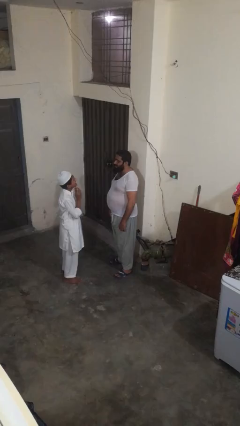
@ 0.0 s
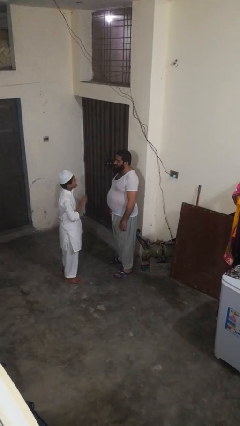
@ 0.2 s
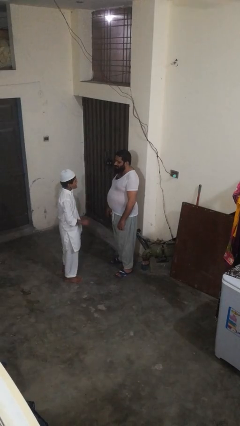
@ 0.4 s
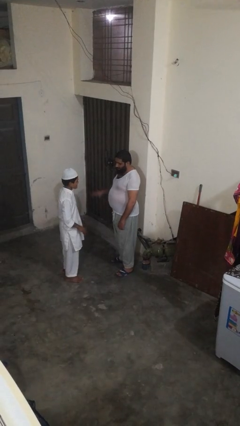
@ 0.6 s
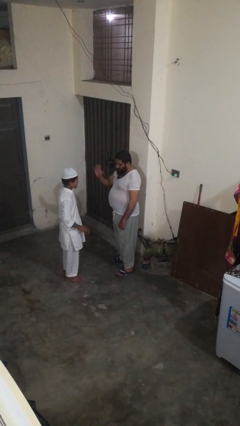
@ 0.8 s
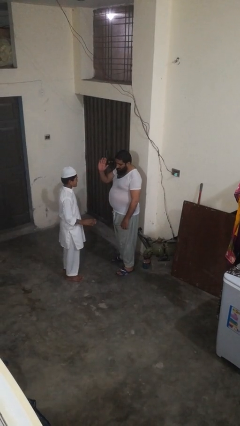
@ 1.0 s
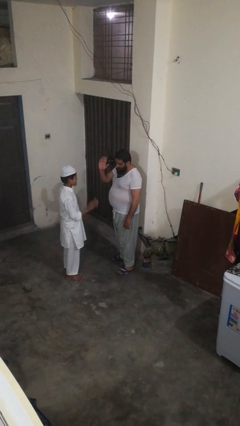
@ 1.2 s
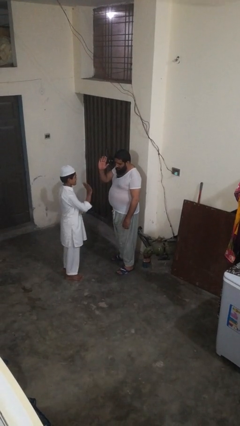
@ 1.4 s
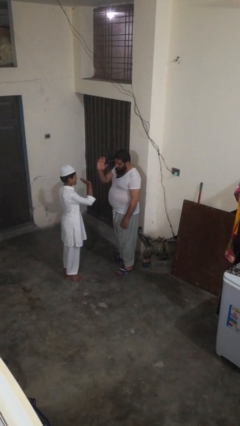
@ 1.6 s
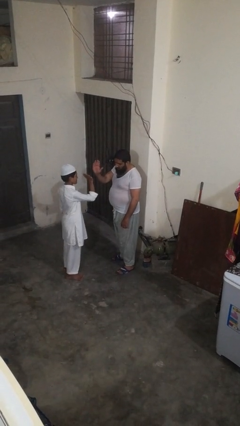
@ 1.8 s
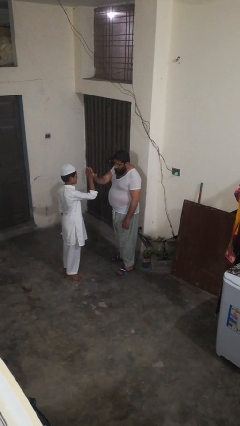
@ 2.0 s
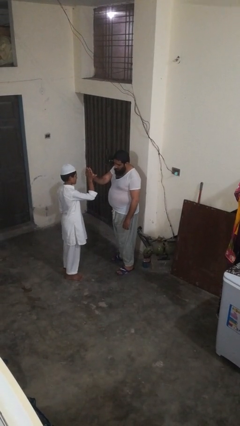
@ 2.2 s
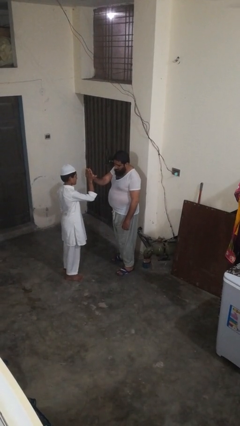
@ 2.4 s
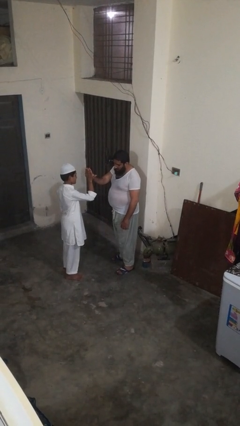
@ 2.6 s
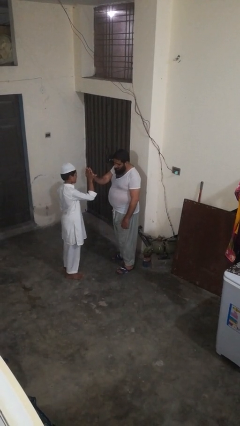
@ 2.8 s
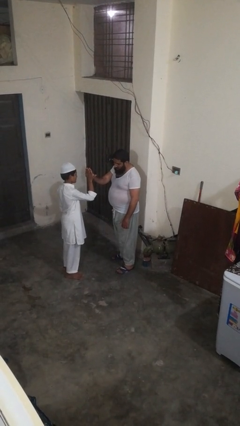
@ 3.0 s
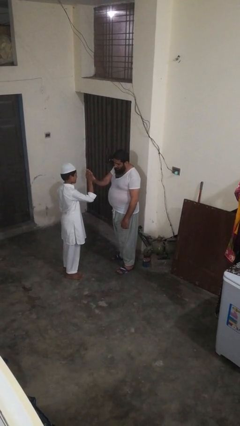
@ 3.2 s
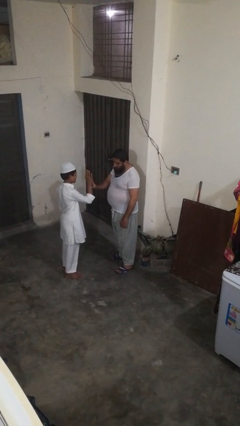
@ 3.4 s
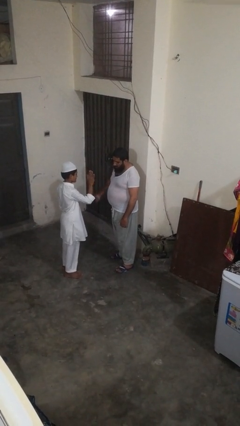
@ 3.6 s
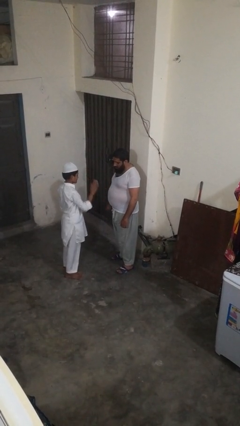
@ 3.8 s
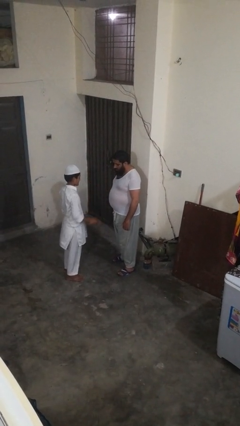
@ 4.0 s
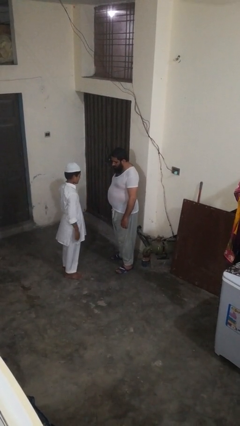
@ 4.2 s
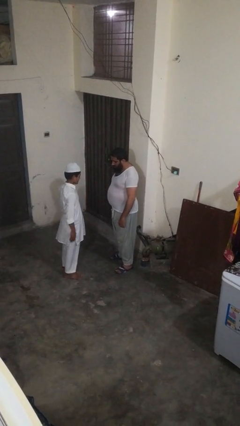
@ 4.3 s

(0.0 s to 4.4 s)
person highfives hand

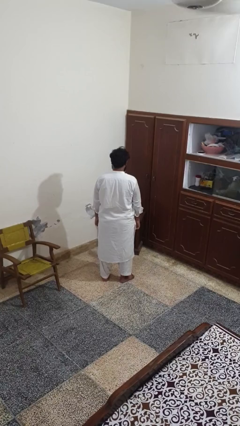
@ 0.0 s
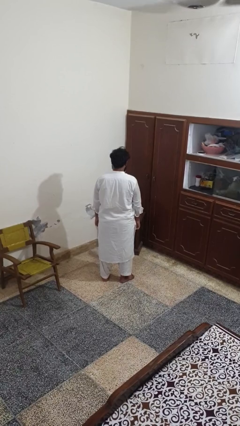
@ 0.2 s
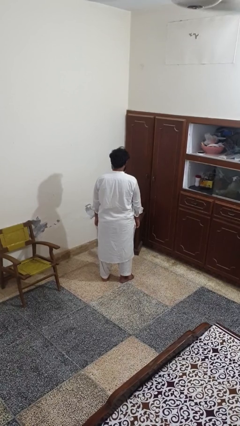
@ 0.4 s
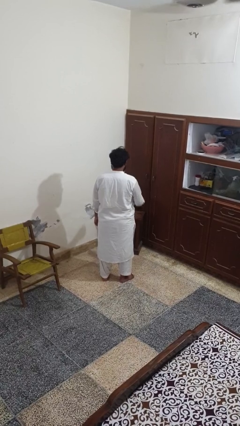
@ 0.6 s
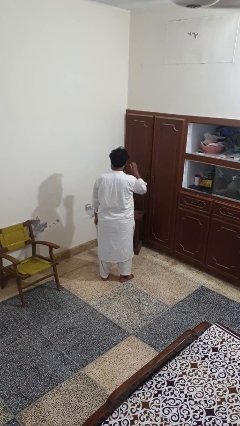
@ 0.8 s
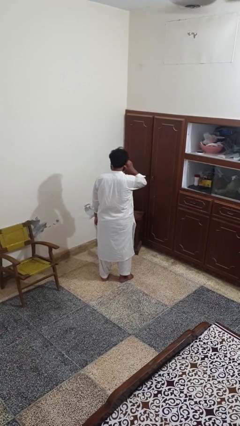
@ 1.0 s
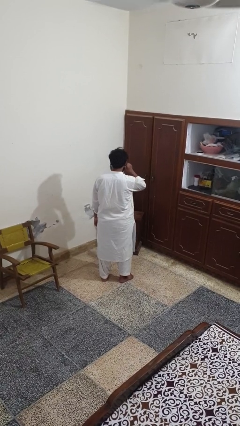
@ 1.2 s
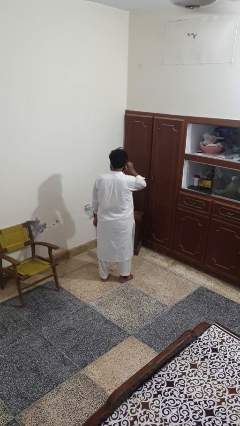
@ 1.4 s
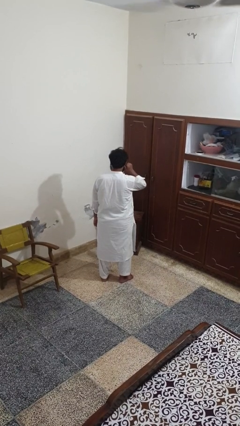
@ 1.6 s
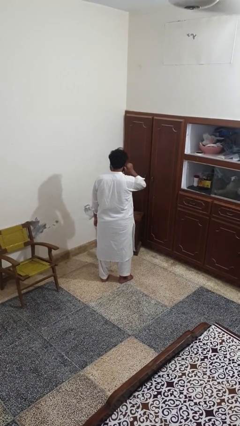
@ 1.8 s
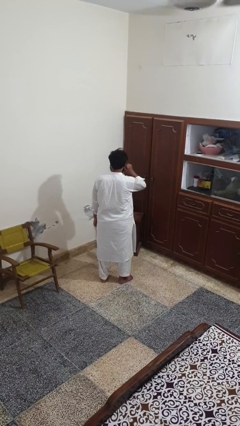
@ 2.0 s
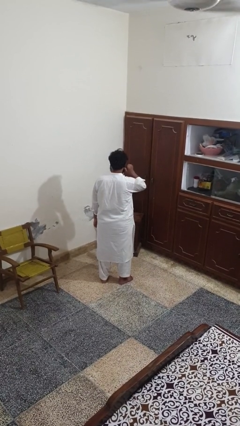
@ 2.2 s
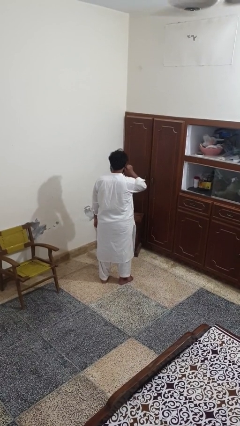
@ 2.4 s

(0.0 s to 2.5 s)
person touches earlobe

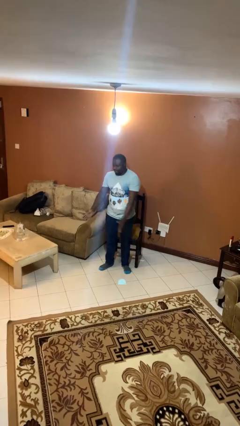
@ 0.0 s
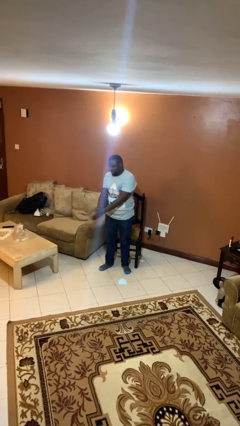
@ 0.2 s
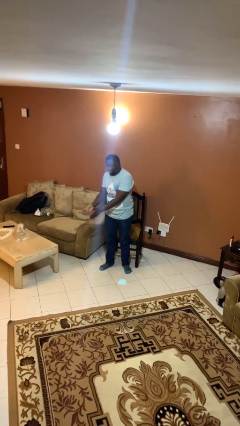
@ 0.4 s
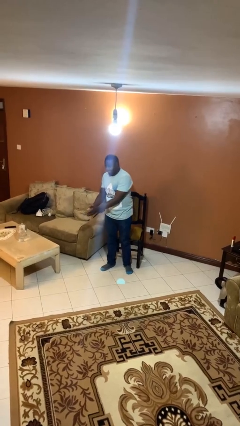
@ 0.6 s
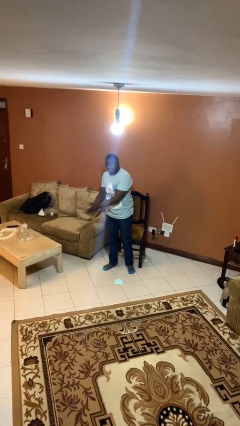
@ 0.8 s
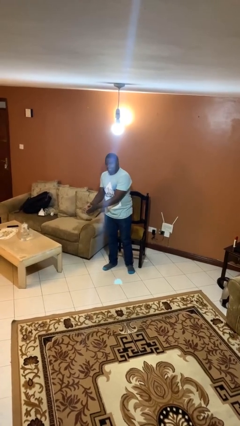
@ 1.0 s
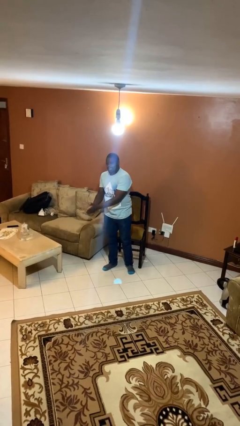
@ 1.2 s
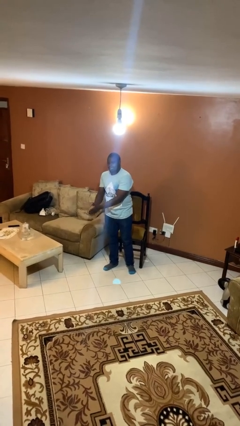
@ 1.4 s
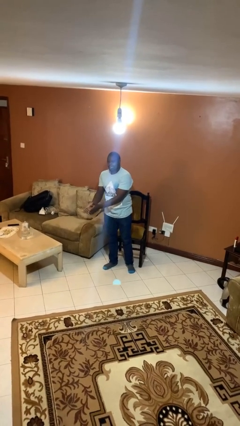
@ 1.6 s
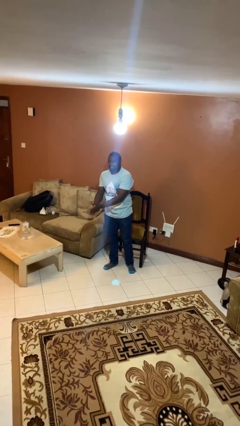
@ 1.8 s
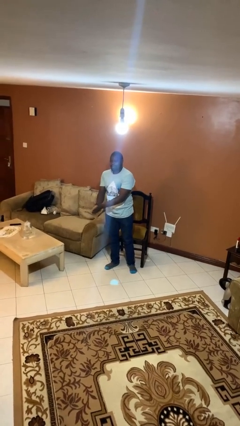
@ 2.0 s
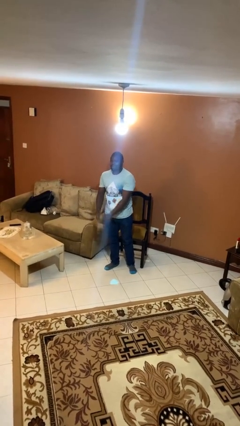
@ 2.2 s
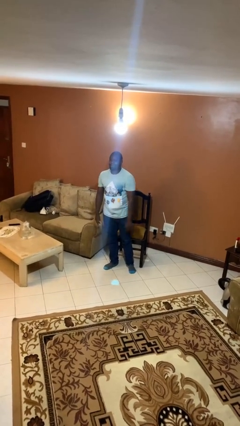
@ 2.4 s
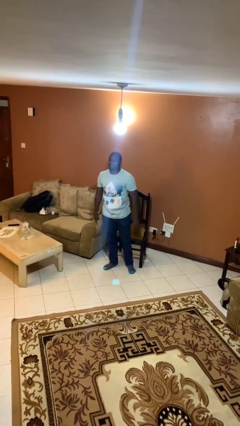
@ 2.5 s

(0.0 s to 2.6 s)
person claps hands

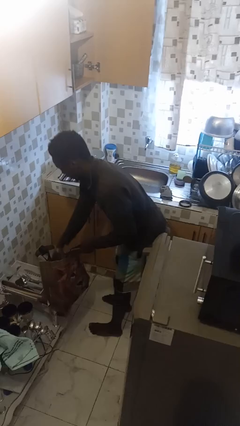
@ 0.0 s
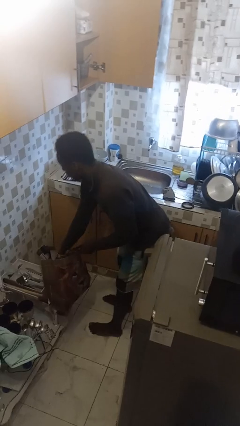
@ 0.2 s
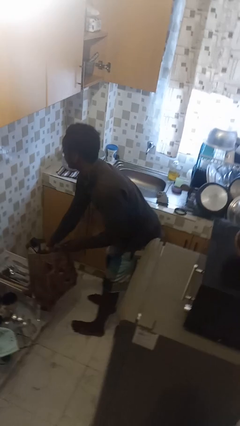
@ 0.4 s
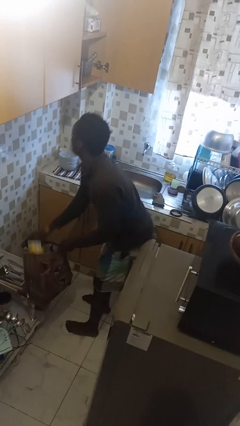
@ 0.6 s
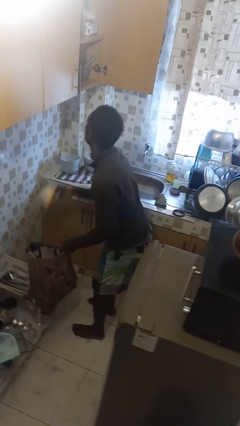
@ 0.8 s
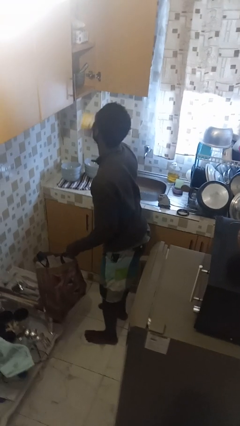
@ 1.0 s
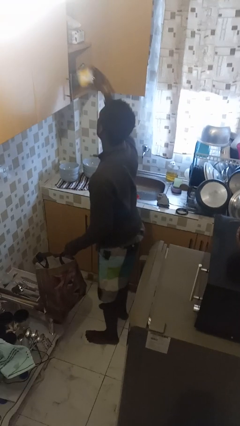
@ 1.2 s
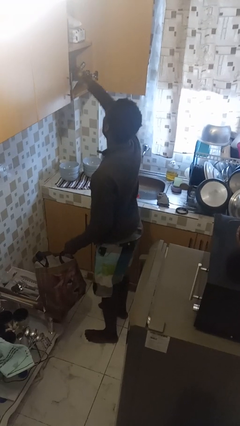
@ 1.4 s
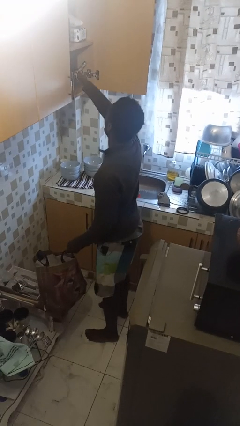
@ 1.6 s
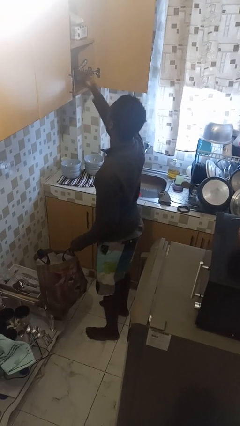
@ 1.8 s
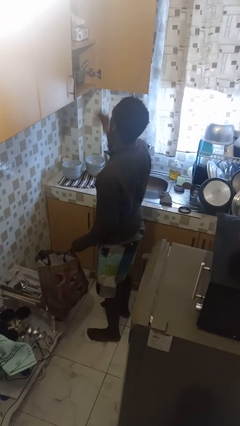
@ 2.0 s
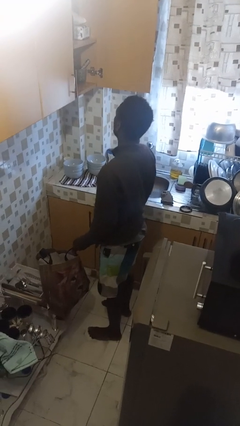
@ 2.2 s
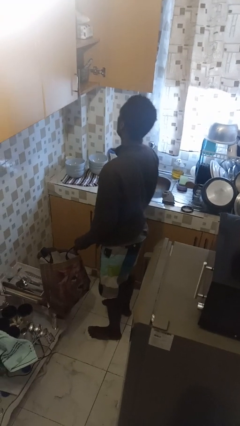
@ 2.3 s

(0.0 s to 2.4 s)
person loads groceries into cabinet

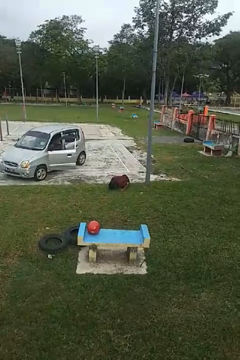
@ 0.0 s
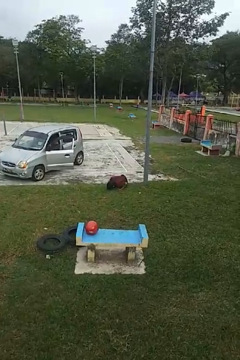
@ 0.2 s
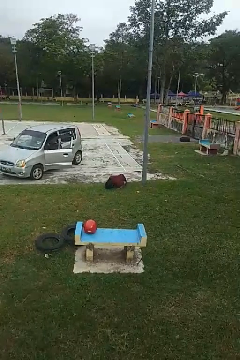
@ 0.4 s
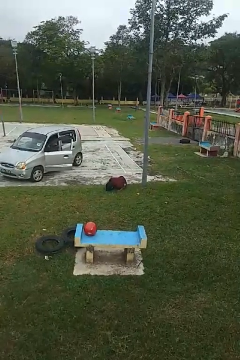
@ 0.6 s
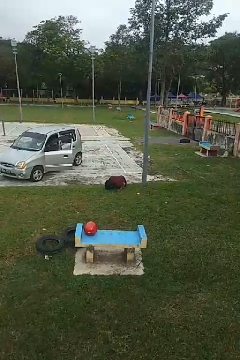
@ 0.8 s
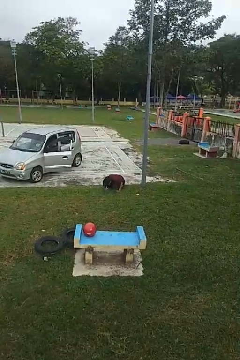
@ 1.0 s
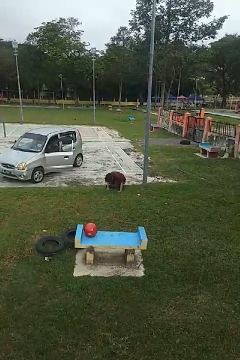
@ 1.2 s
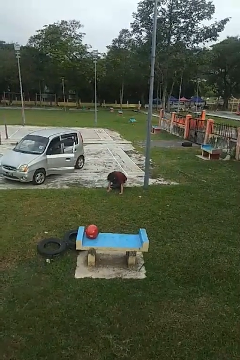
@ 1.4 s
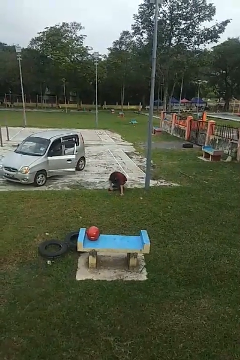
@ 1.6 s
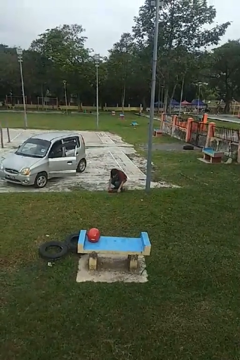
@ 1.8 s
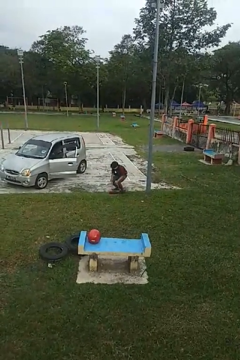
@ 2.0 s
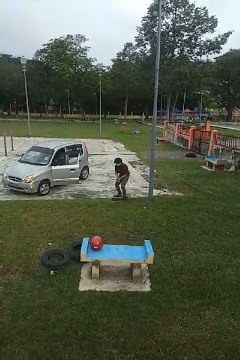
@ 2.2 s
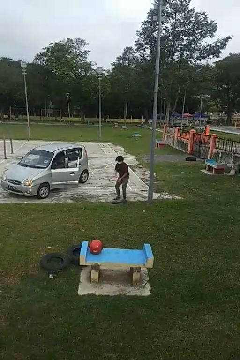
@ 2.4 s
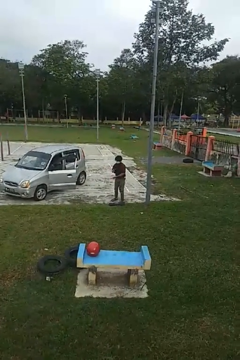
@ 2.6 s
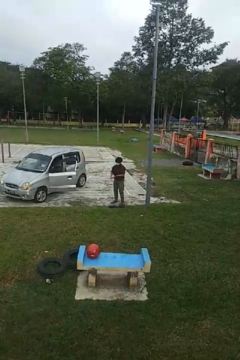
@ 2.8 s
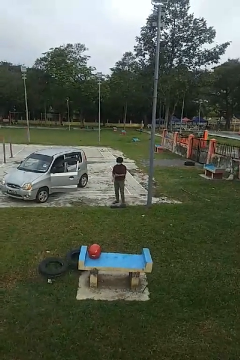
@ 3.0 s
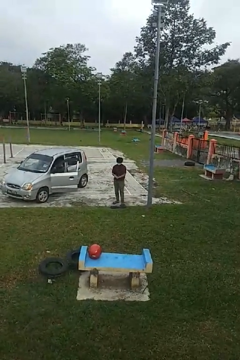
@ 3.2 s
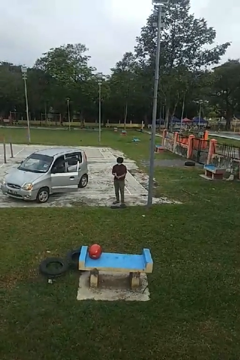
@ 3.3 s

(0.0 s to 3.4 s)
person stands up from floor

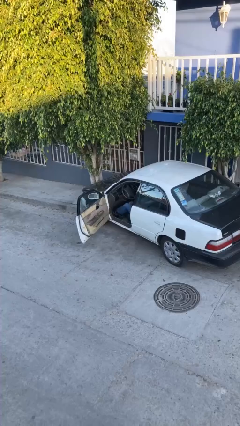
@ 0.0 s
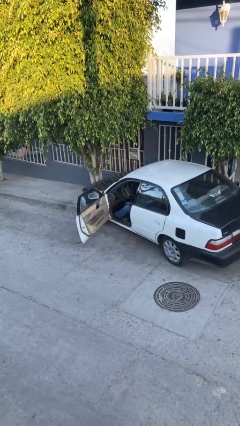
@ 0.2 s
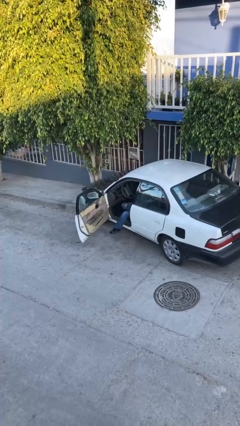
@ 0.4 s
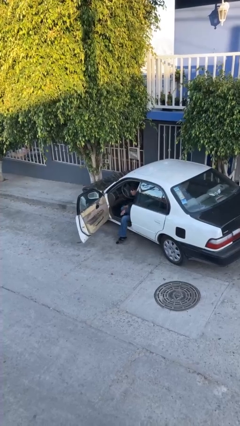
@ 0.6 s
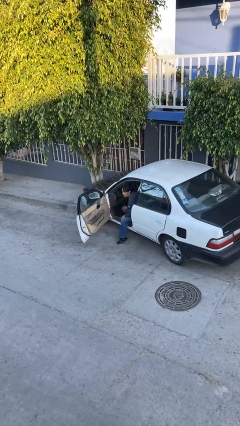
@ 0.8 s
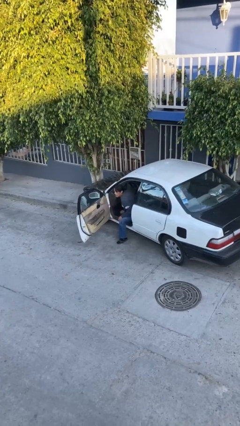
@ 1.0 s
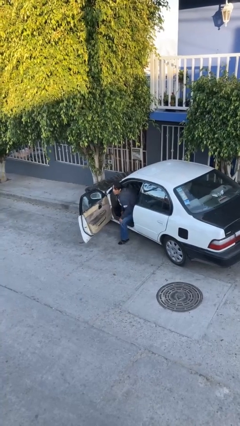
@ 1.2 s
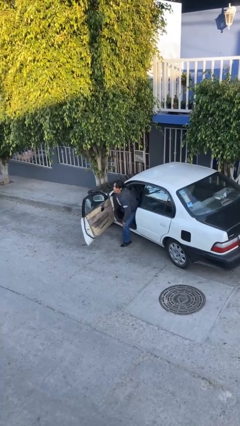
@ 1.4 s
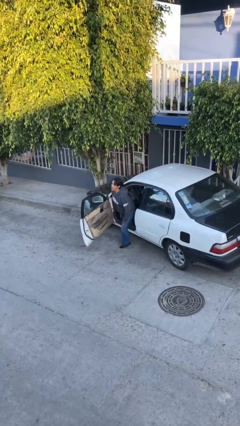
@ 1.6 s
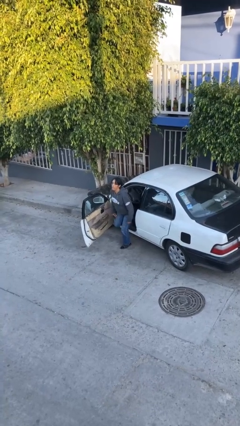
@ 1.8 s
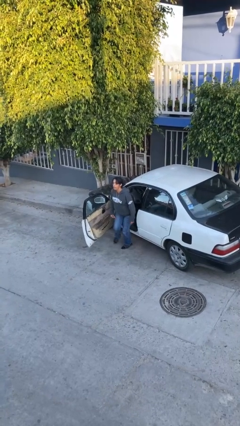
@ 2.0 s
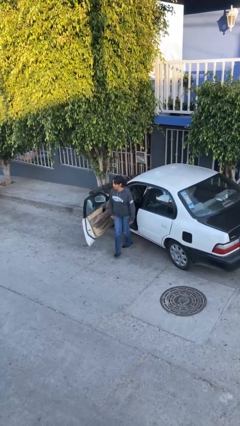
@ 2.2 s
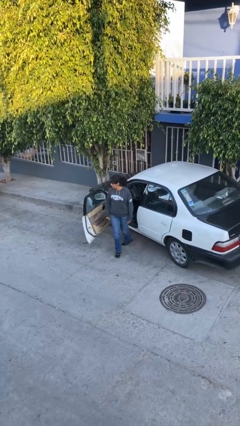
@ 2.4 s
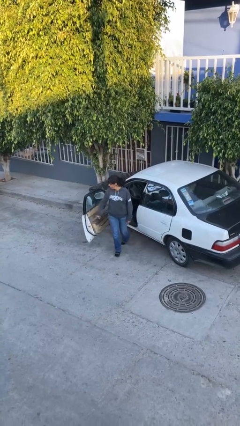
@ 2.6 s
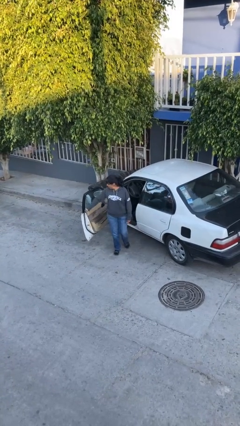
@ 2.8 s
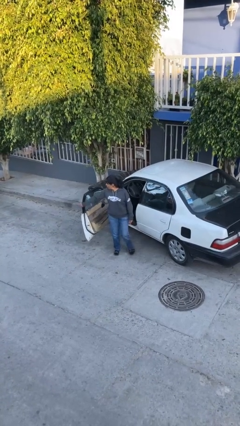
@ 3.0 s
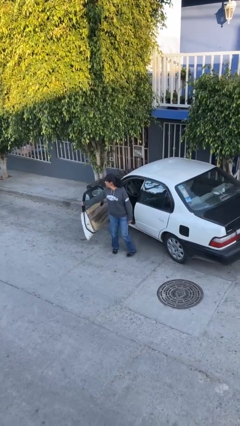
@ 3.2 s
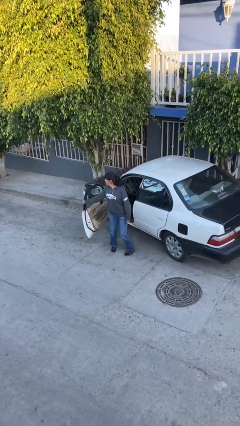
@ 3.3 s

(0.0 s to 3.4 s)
person exits car
